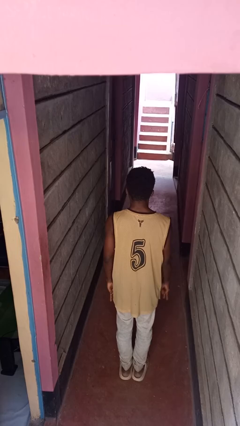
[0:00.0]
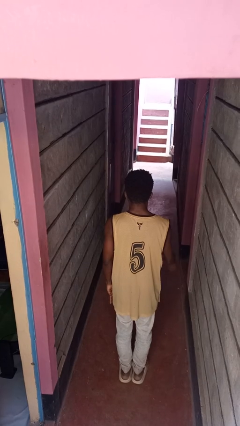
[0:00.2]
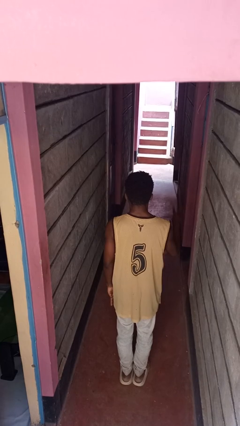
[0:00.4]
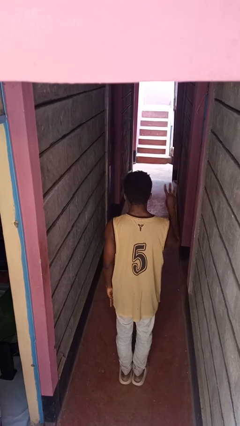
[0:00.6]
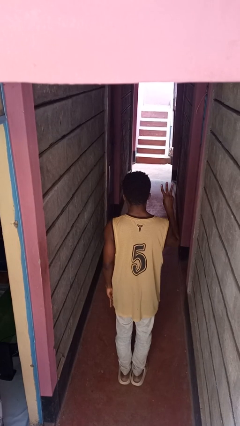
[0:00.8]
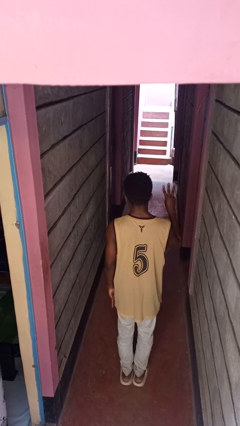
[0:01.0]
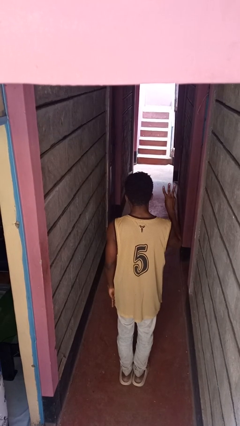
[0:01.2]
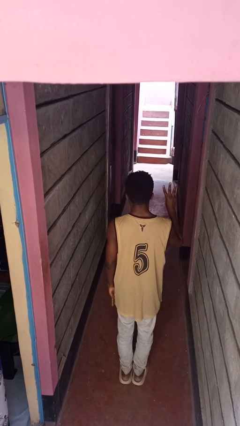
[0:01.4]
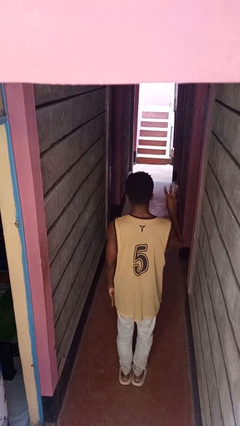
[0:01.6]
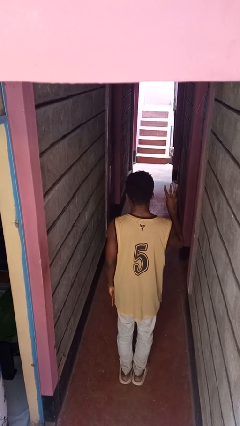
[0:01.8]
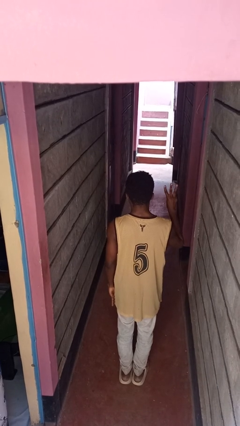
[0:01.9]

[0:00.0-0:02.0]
person gestures number three

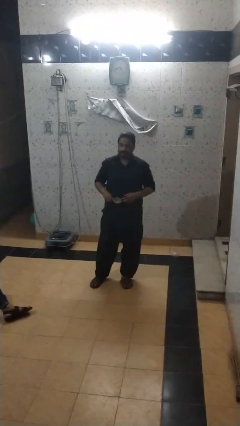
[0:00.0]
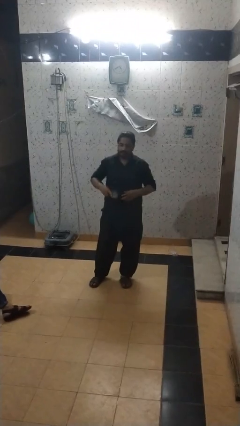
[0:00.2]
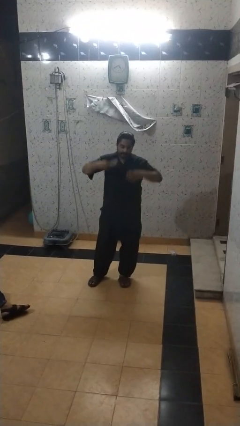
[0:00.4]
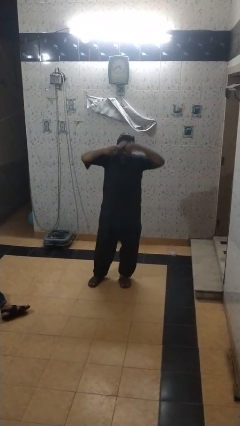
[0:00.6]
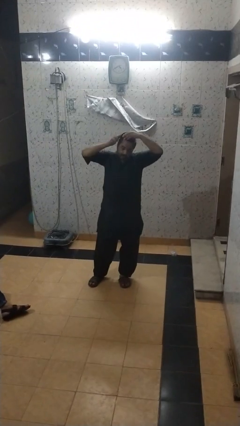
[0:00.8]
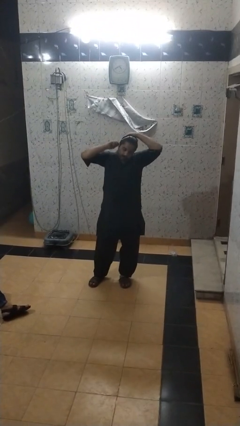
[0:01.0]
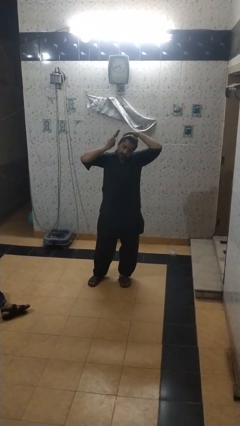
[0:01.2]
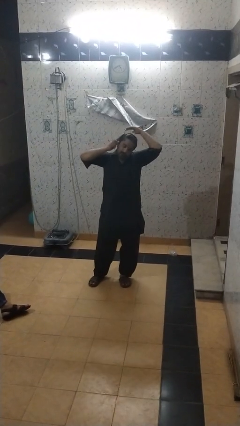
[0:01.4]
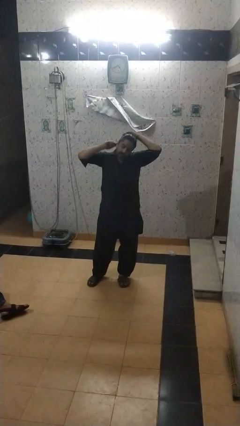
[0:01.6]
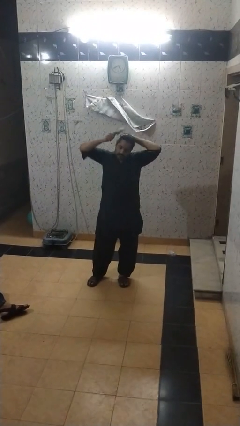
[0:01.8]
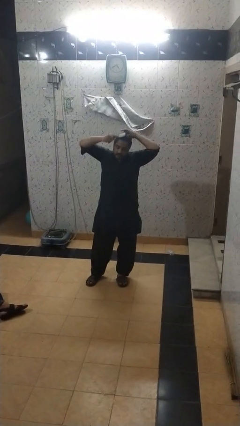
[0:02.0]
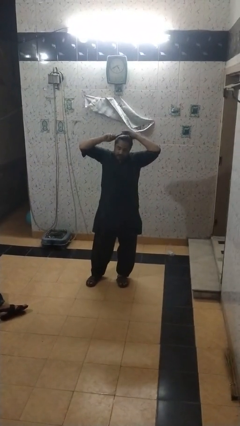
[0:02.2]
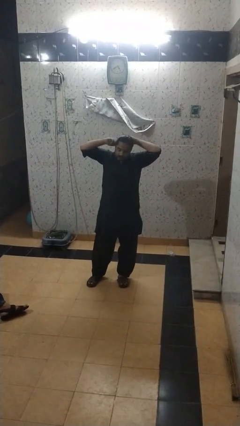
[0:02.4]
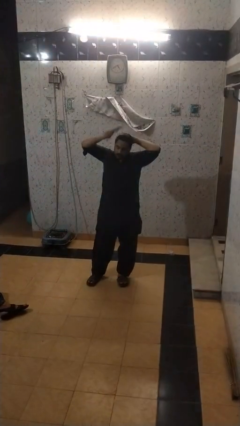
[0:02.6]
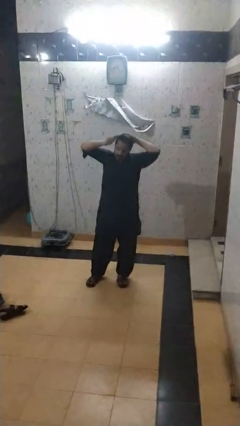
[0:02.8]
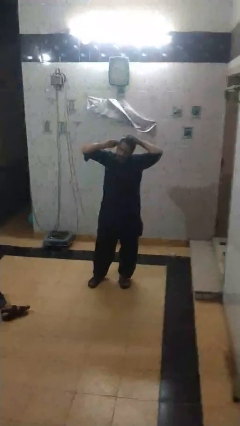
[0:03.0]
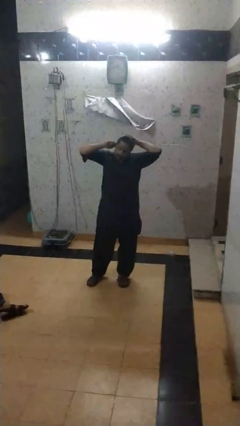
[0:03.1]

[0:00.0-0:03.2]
person brushes hair

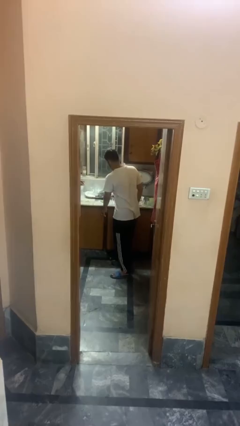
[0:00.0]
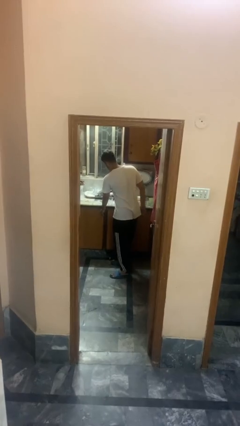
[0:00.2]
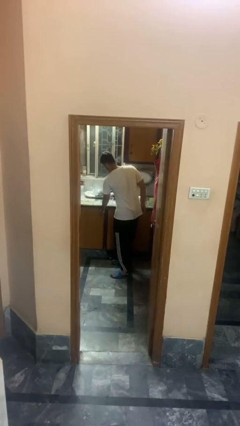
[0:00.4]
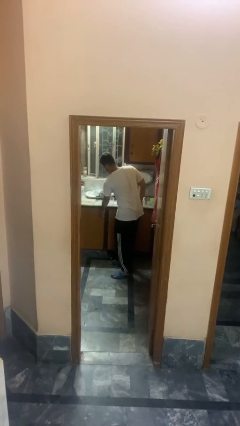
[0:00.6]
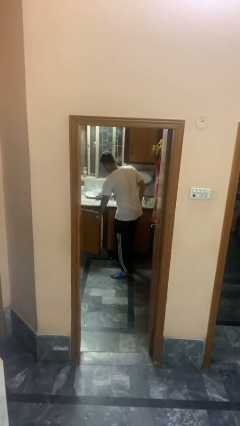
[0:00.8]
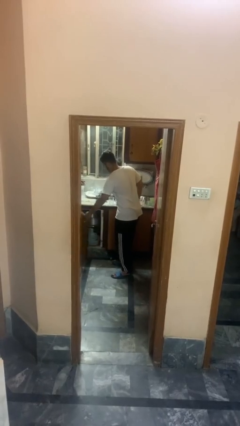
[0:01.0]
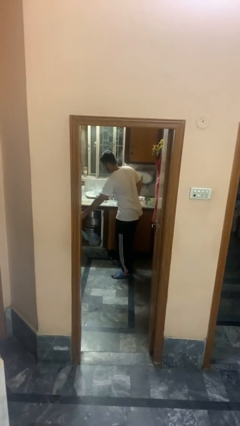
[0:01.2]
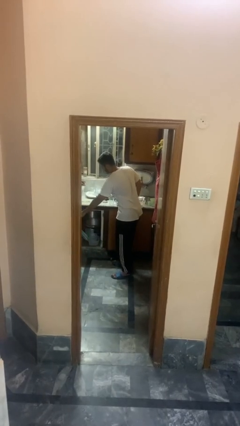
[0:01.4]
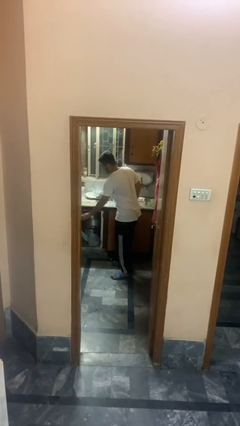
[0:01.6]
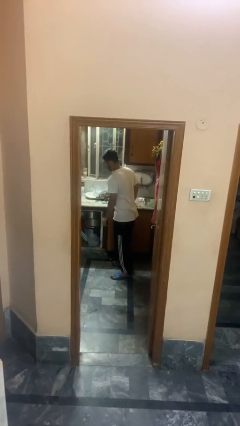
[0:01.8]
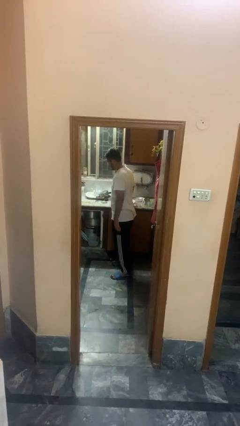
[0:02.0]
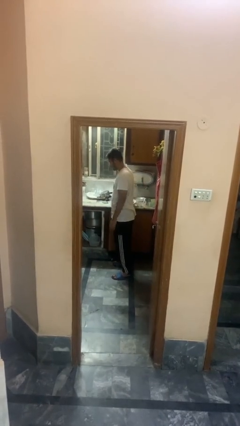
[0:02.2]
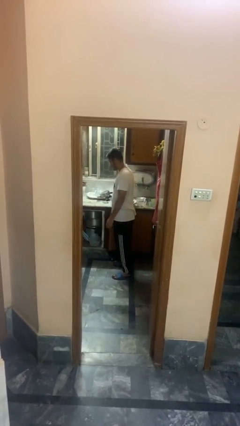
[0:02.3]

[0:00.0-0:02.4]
person opens cabinet

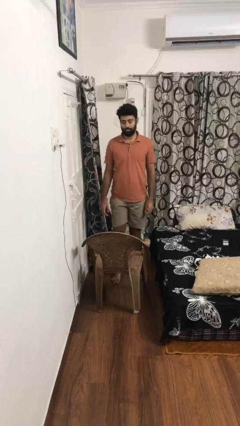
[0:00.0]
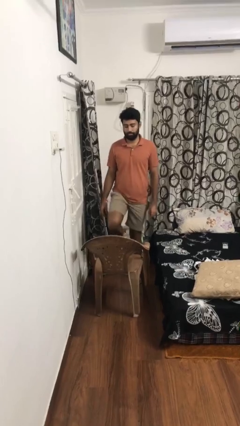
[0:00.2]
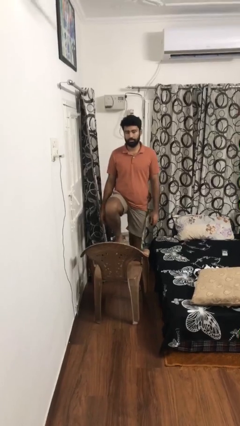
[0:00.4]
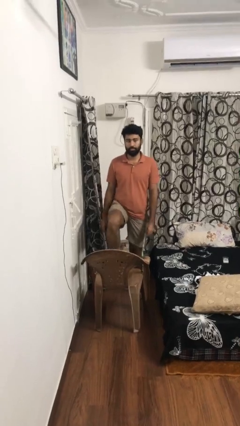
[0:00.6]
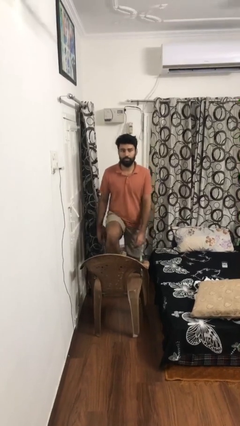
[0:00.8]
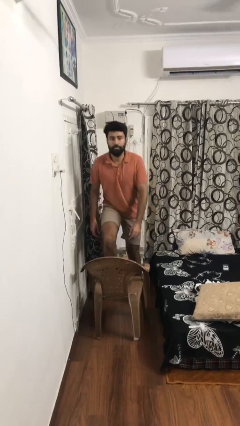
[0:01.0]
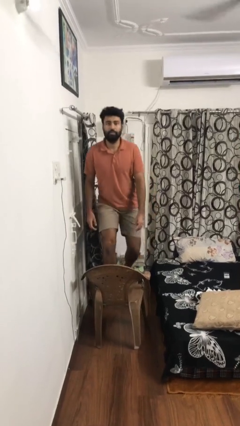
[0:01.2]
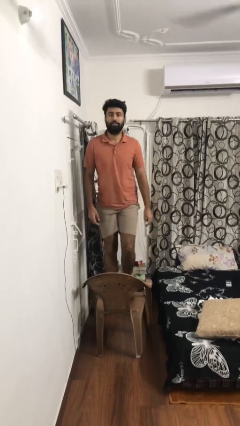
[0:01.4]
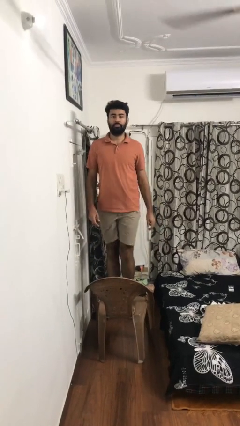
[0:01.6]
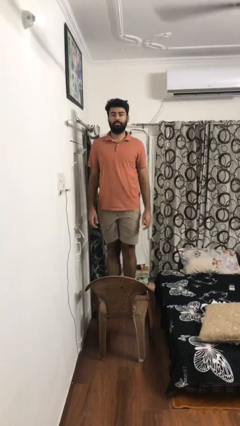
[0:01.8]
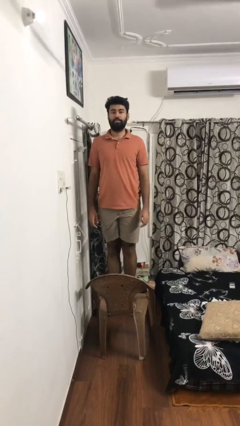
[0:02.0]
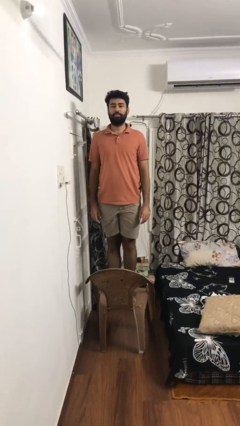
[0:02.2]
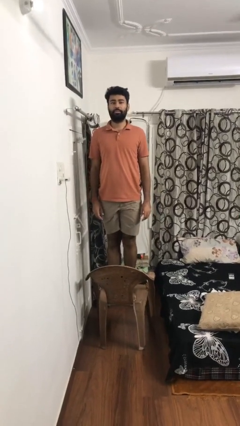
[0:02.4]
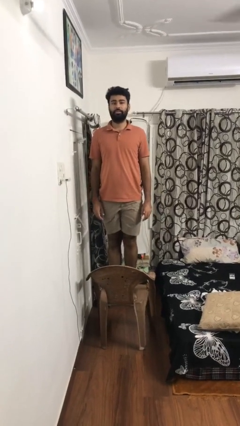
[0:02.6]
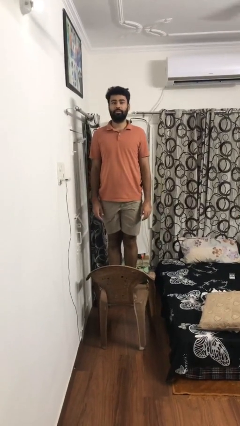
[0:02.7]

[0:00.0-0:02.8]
person climbs on chair

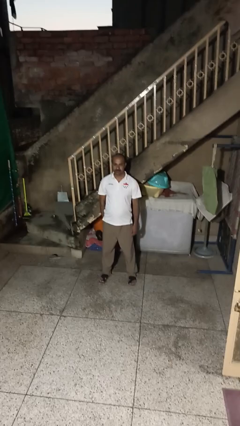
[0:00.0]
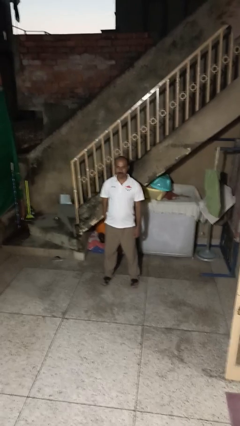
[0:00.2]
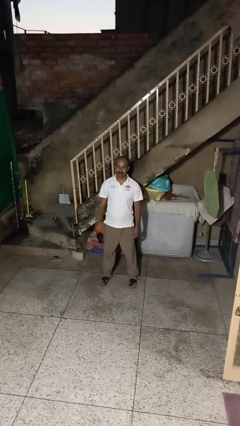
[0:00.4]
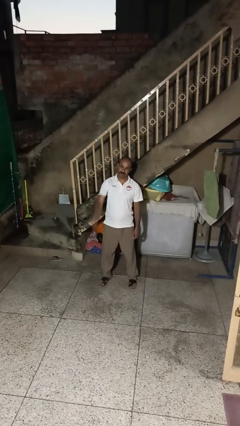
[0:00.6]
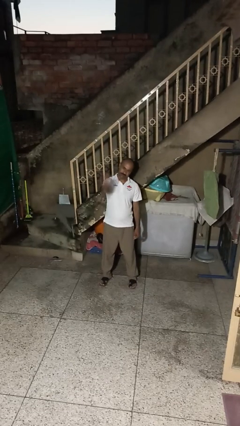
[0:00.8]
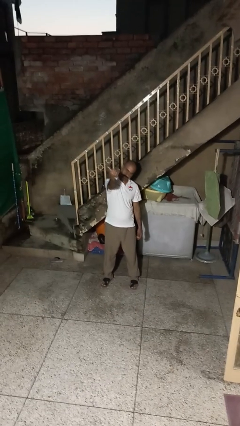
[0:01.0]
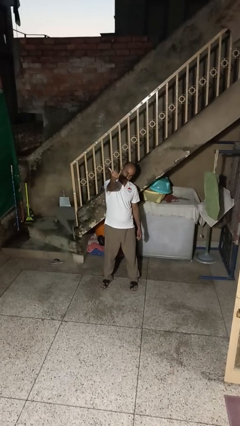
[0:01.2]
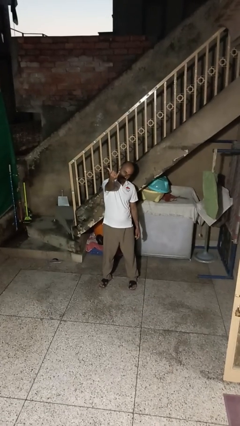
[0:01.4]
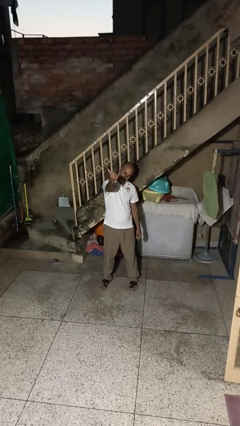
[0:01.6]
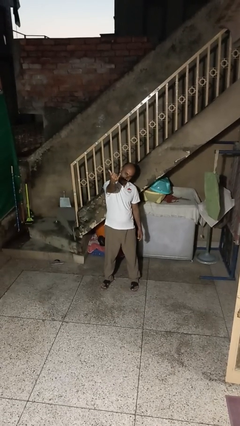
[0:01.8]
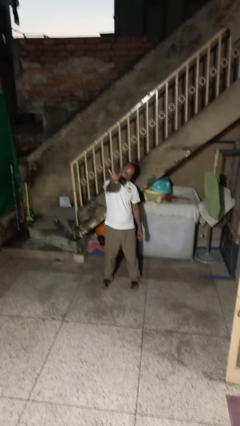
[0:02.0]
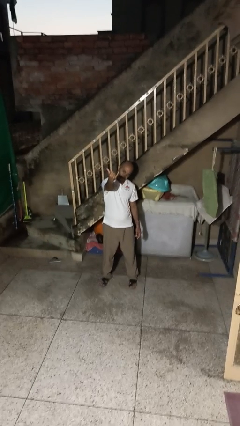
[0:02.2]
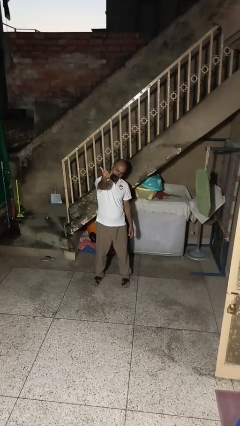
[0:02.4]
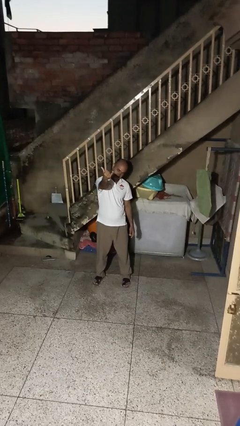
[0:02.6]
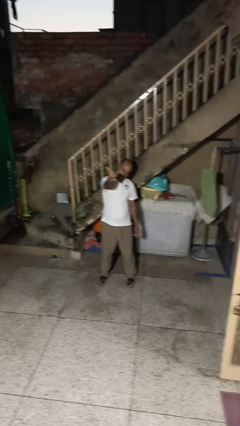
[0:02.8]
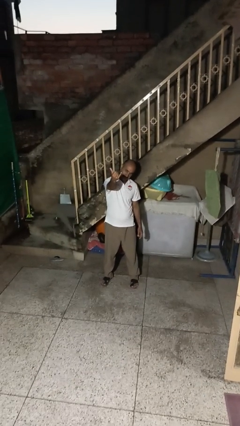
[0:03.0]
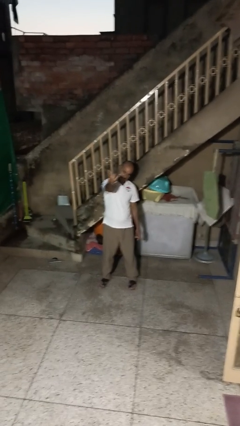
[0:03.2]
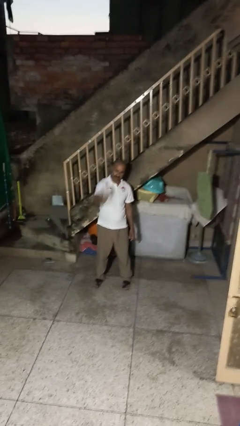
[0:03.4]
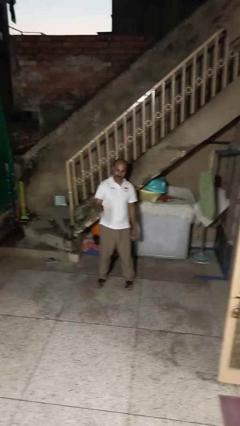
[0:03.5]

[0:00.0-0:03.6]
person gestures hang loose

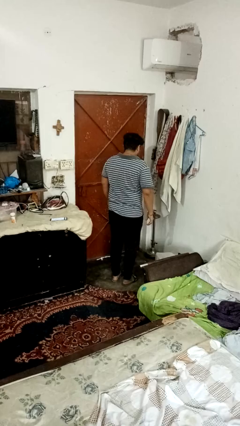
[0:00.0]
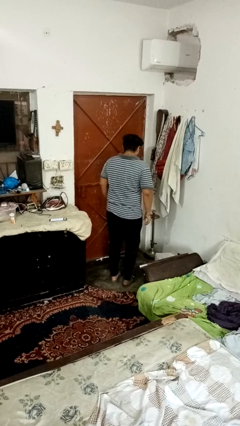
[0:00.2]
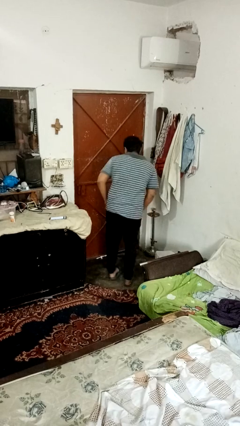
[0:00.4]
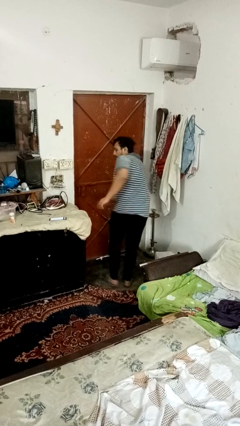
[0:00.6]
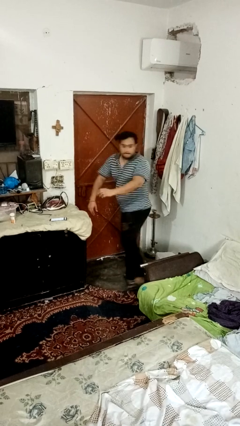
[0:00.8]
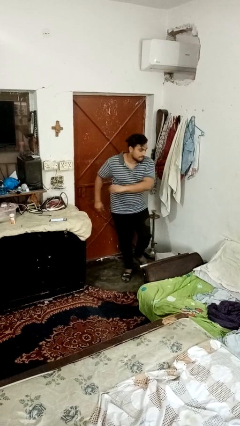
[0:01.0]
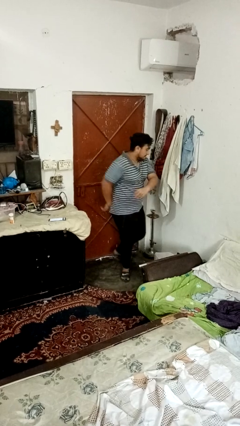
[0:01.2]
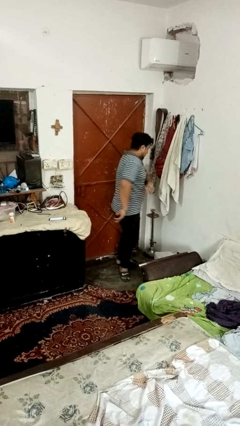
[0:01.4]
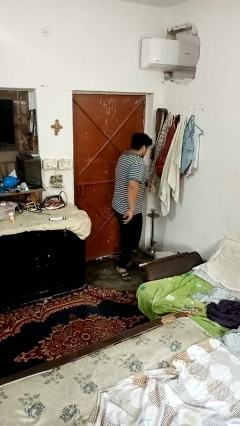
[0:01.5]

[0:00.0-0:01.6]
person twirls

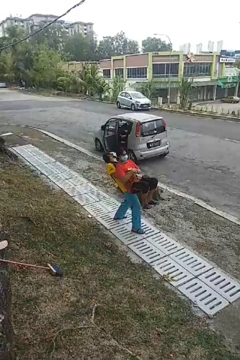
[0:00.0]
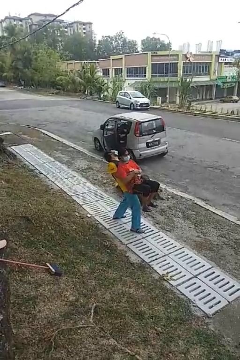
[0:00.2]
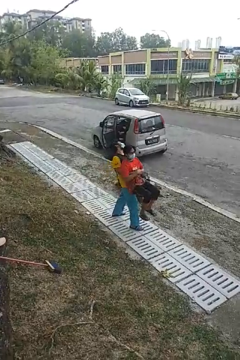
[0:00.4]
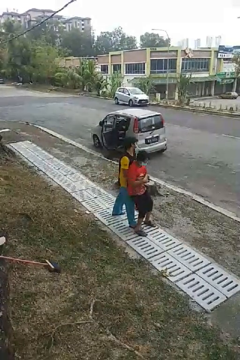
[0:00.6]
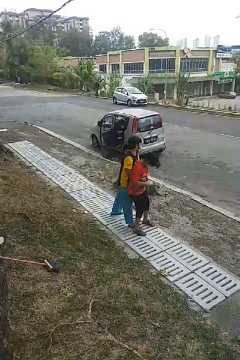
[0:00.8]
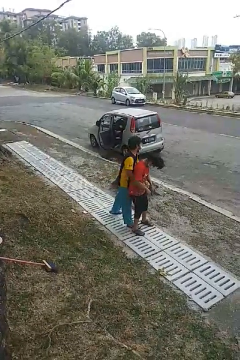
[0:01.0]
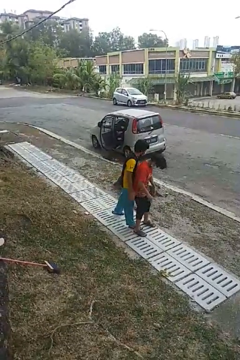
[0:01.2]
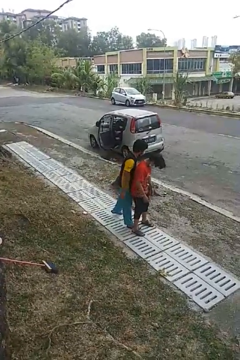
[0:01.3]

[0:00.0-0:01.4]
person puts down person

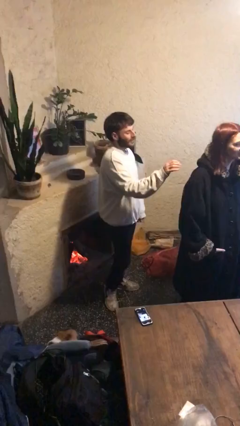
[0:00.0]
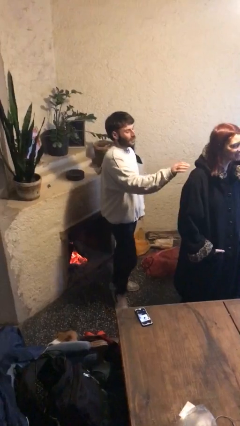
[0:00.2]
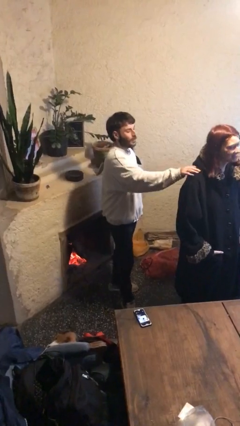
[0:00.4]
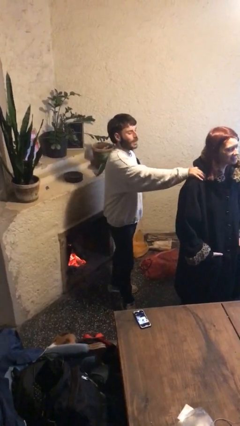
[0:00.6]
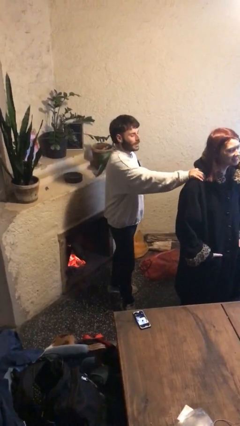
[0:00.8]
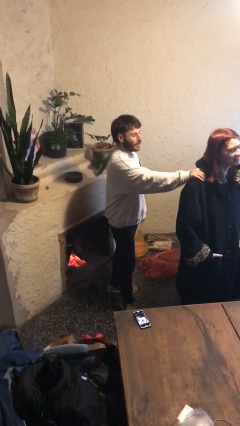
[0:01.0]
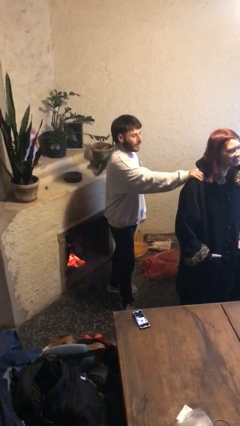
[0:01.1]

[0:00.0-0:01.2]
person grabs person by shoulder
